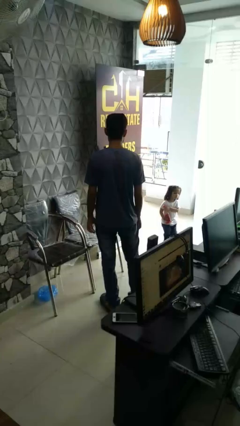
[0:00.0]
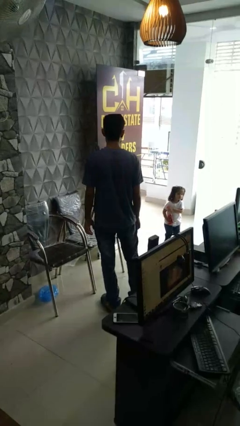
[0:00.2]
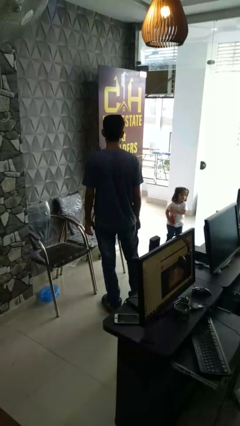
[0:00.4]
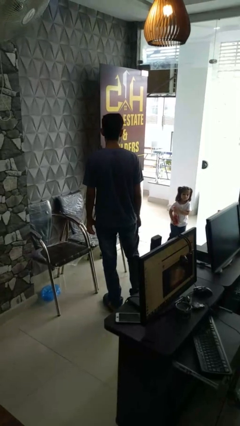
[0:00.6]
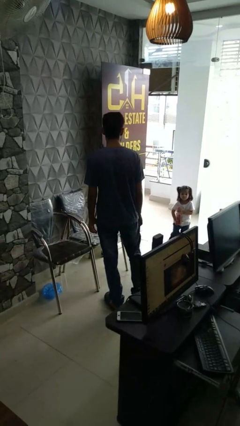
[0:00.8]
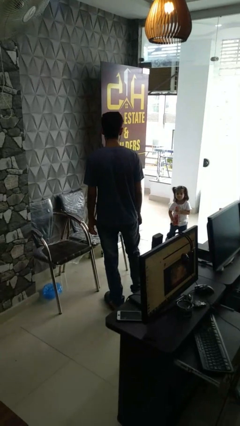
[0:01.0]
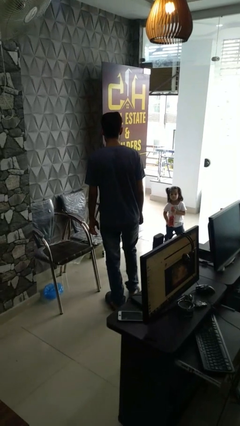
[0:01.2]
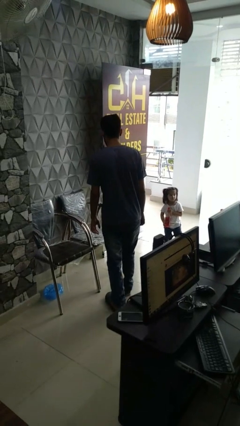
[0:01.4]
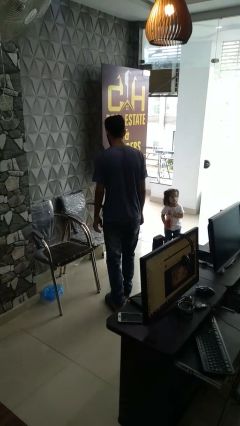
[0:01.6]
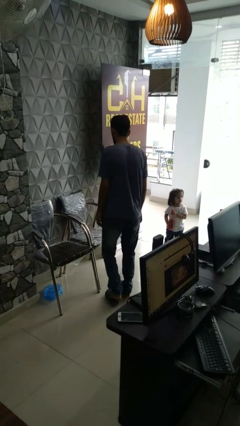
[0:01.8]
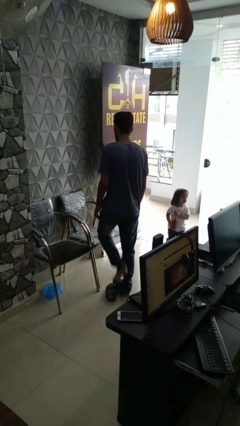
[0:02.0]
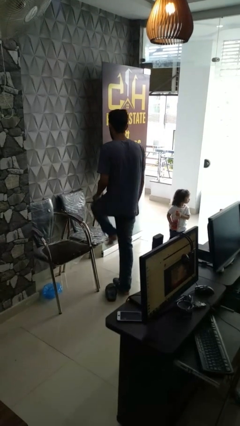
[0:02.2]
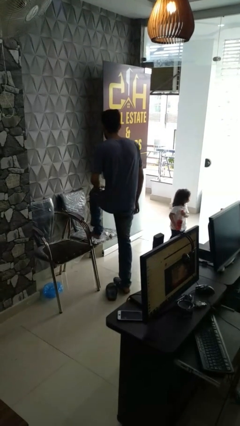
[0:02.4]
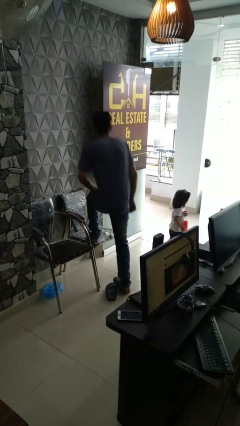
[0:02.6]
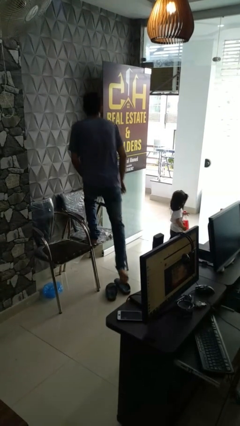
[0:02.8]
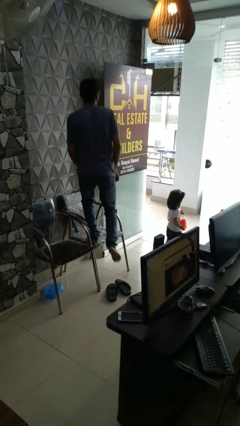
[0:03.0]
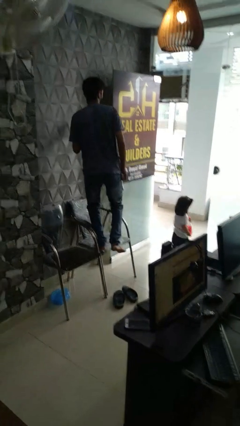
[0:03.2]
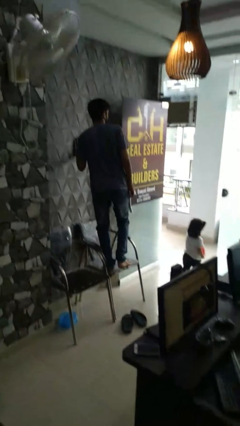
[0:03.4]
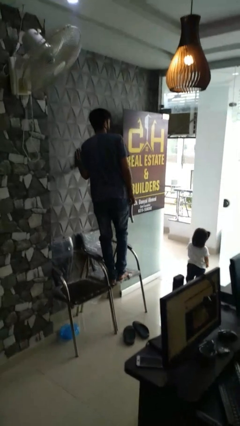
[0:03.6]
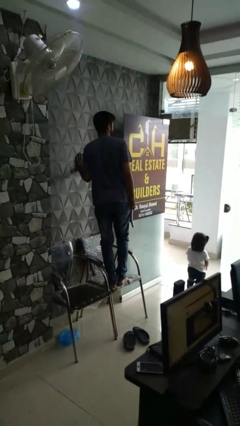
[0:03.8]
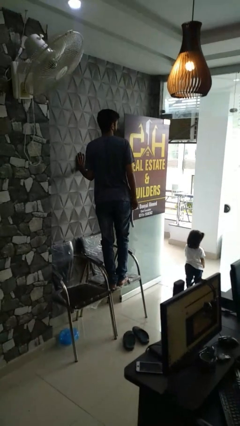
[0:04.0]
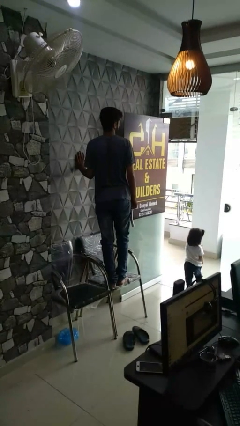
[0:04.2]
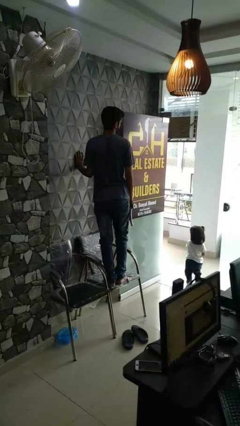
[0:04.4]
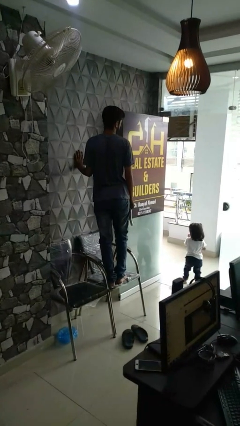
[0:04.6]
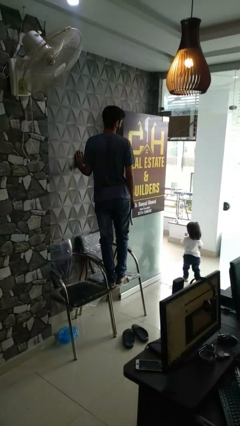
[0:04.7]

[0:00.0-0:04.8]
person climbs on chair

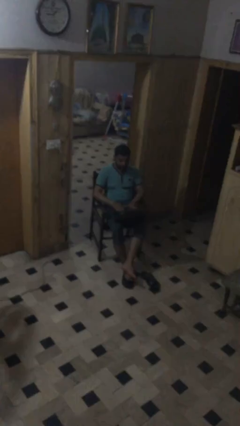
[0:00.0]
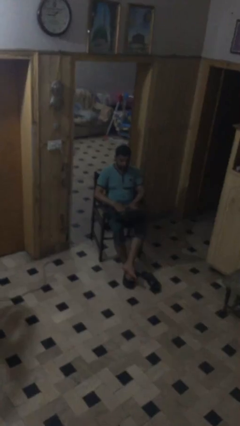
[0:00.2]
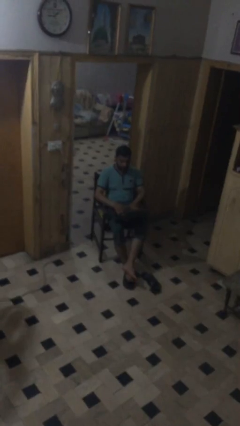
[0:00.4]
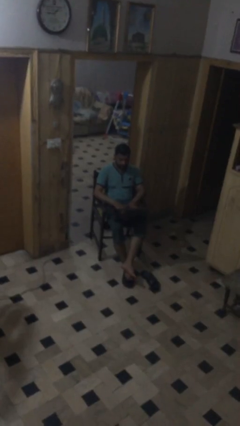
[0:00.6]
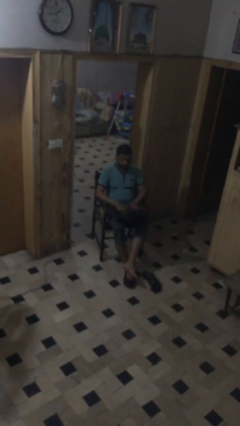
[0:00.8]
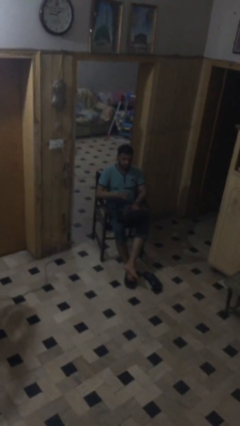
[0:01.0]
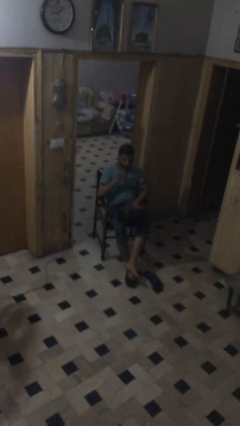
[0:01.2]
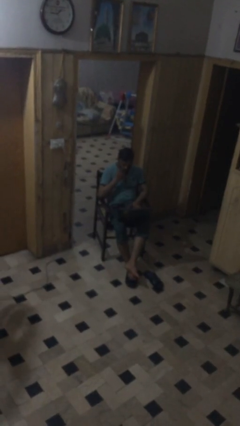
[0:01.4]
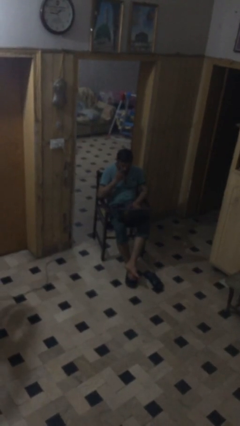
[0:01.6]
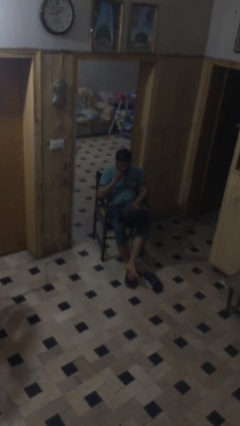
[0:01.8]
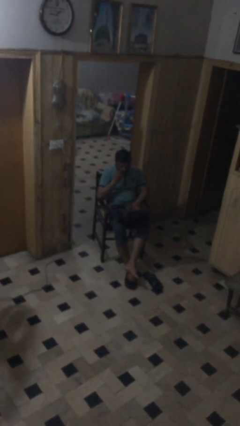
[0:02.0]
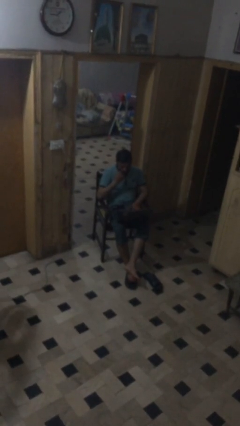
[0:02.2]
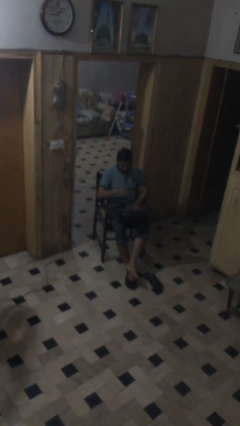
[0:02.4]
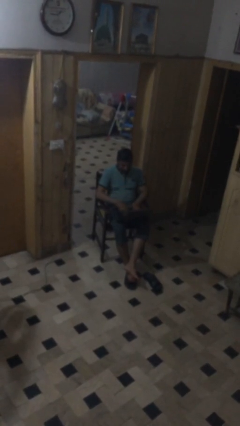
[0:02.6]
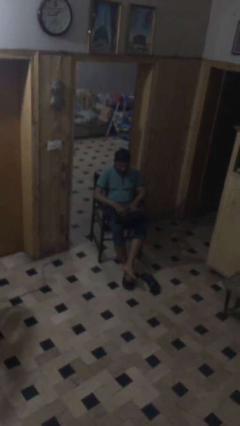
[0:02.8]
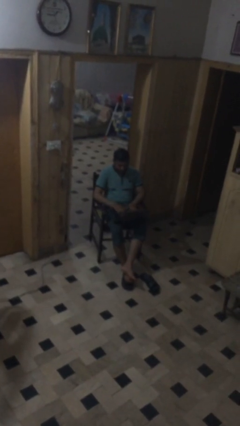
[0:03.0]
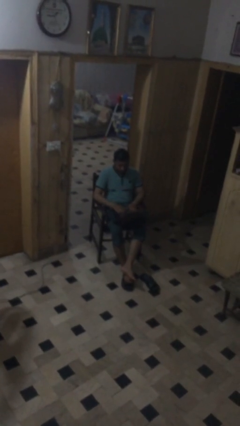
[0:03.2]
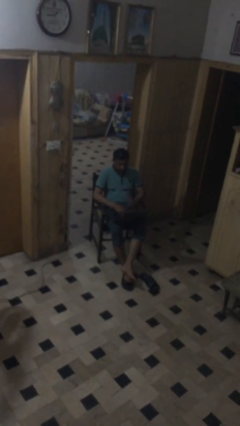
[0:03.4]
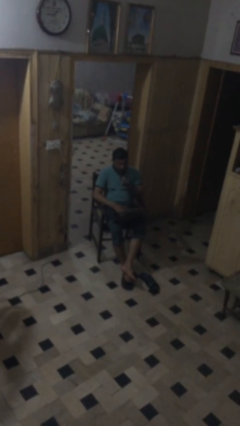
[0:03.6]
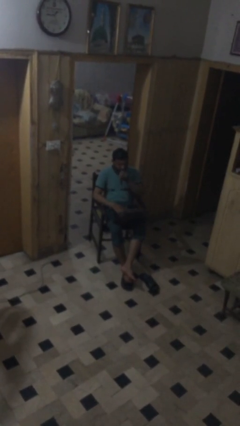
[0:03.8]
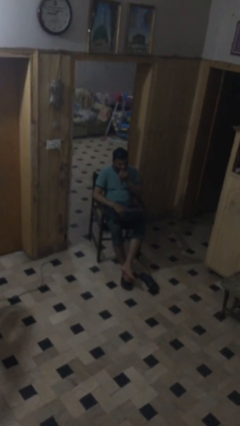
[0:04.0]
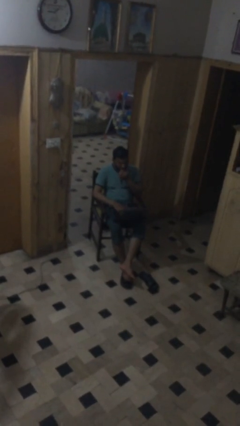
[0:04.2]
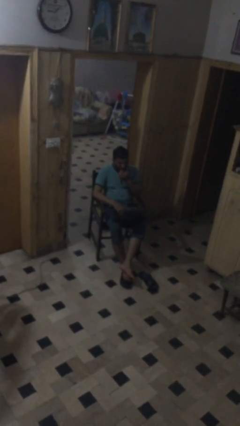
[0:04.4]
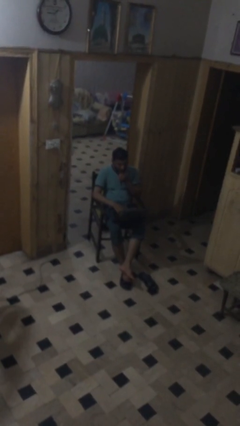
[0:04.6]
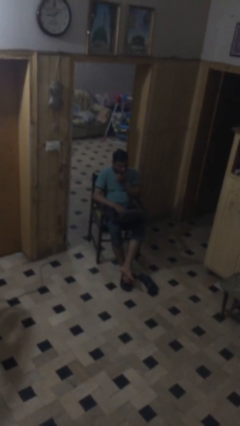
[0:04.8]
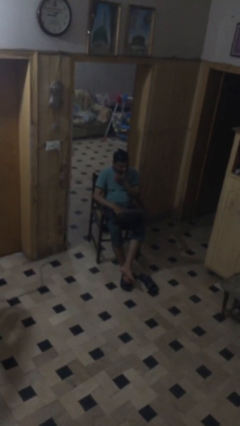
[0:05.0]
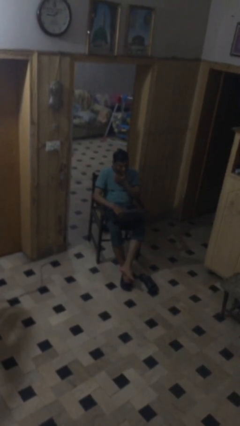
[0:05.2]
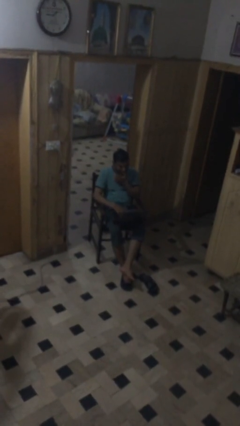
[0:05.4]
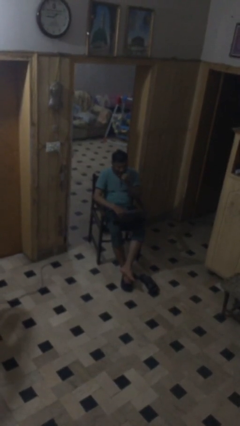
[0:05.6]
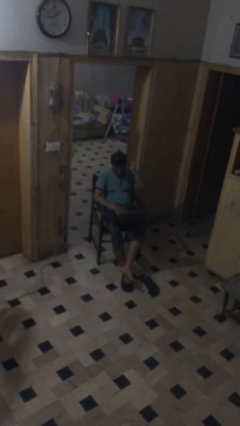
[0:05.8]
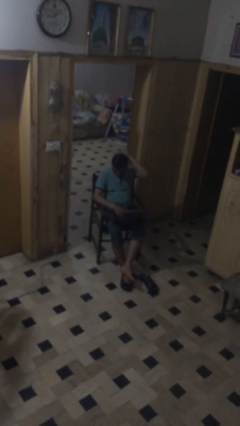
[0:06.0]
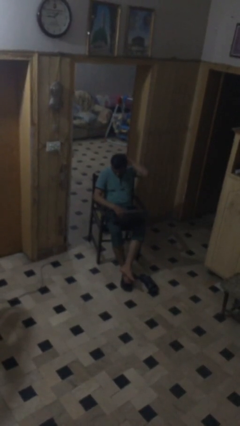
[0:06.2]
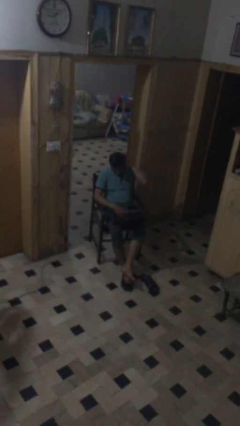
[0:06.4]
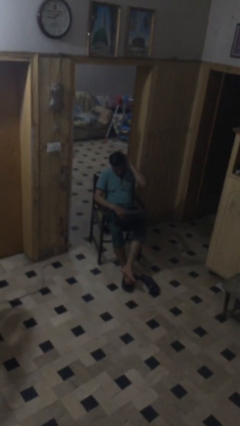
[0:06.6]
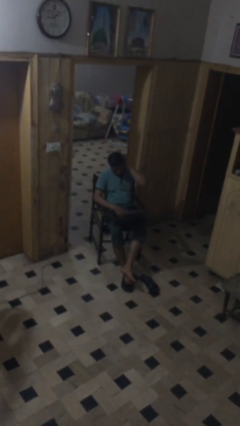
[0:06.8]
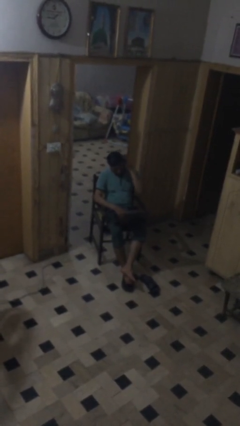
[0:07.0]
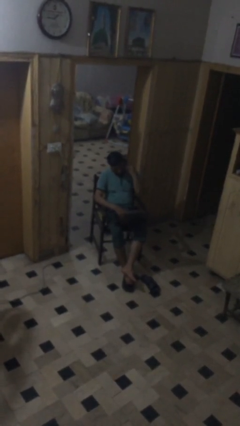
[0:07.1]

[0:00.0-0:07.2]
person interacts with laptop

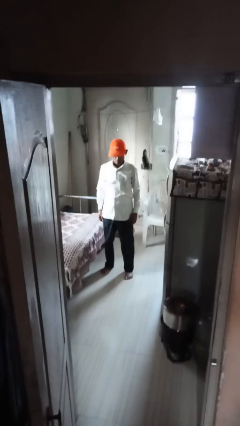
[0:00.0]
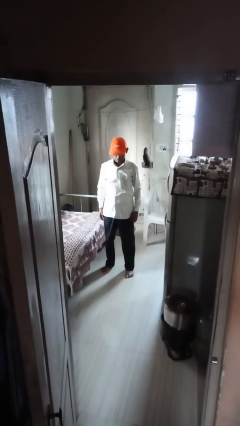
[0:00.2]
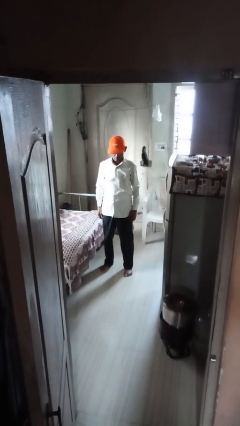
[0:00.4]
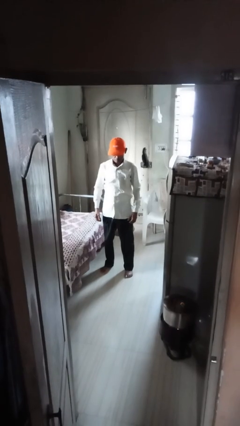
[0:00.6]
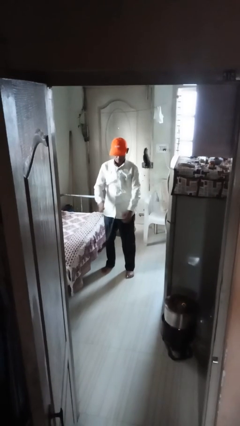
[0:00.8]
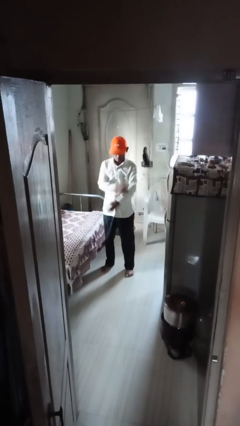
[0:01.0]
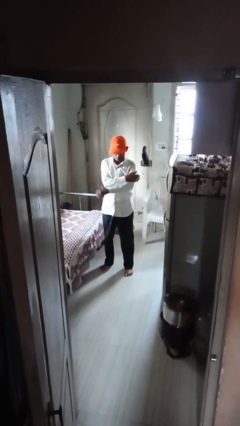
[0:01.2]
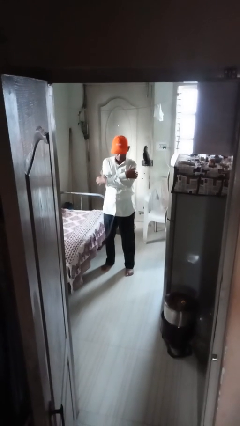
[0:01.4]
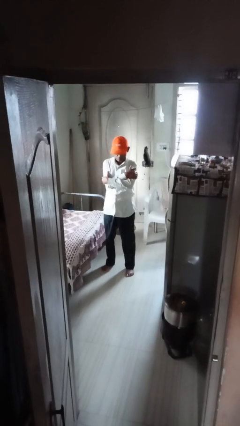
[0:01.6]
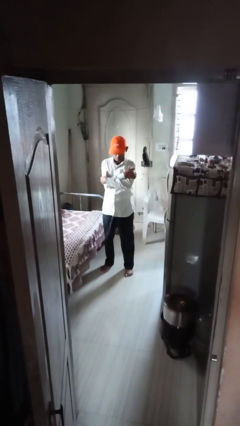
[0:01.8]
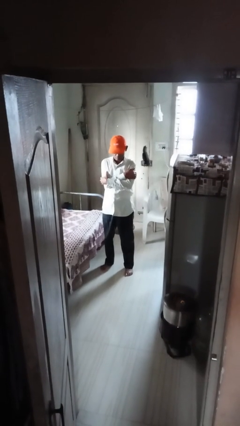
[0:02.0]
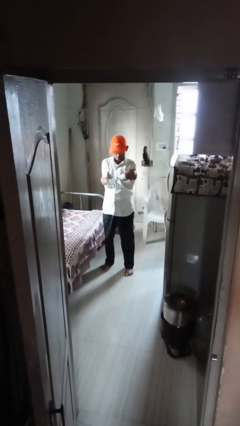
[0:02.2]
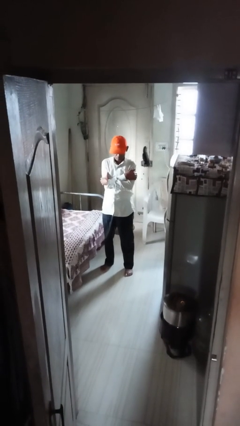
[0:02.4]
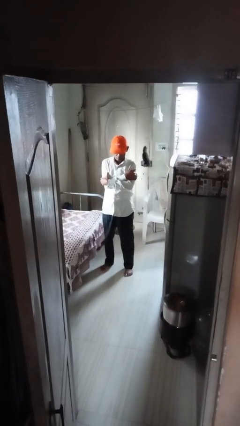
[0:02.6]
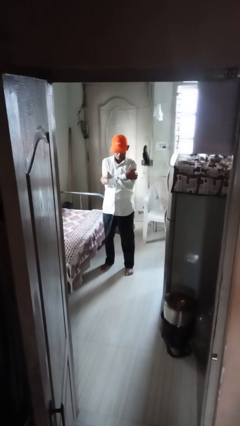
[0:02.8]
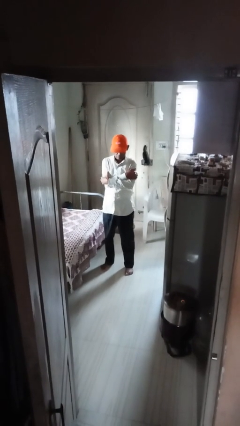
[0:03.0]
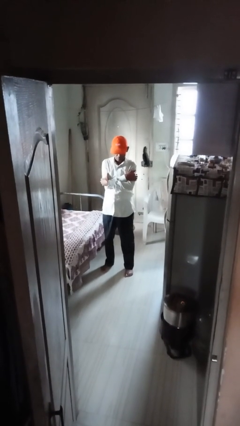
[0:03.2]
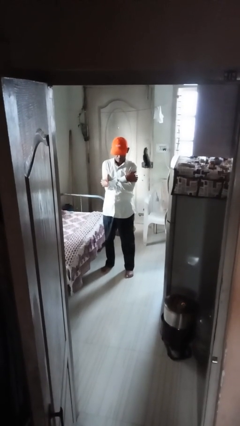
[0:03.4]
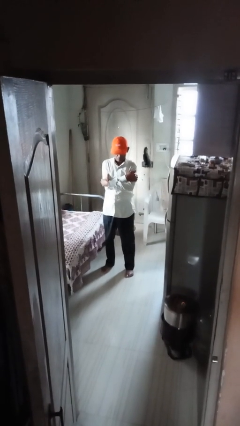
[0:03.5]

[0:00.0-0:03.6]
person crosses arms

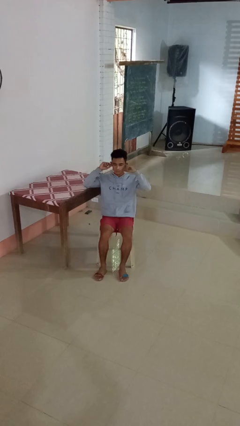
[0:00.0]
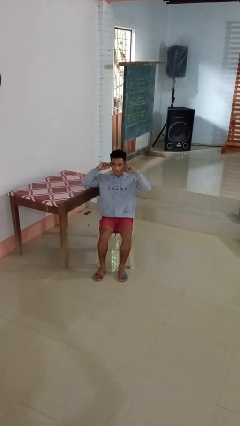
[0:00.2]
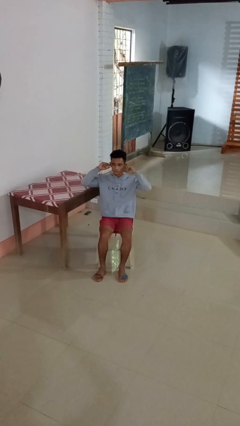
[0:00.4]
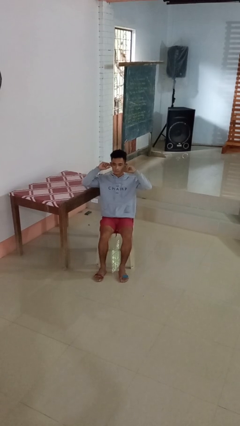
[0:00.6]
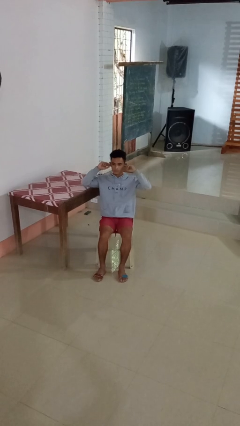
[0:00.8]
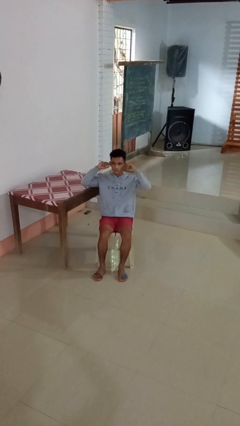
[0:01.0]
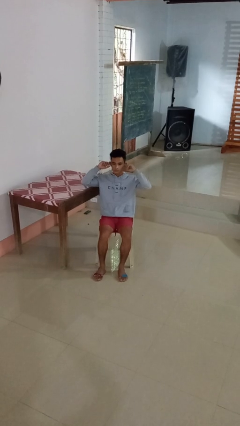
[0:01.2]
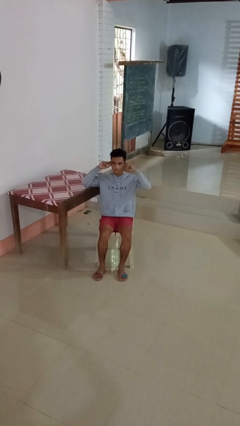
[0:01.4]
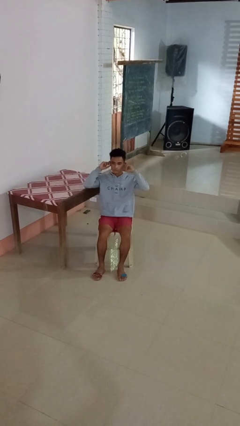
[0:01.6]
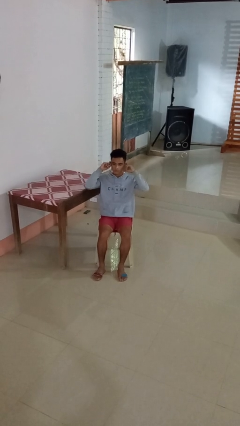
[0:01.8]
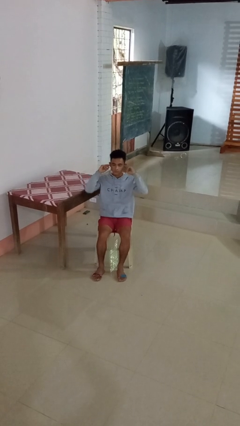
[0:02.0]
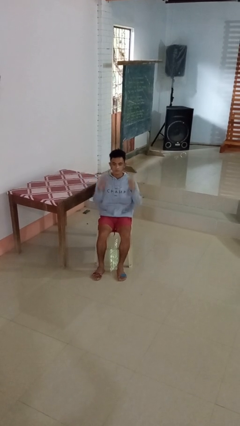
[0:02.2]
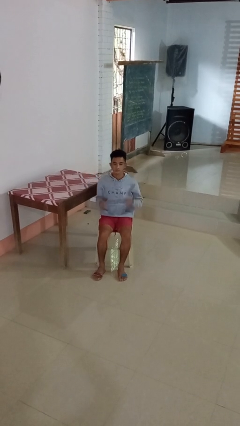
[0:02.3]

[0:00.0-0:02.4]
person puts fingers in ear
